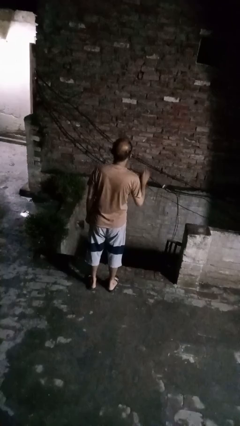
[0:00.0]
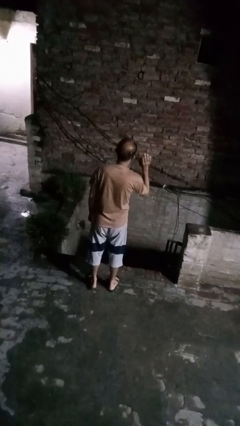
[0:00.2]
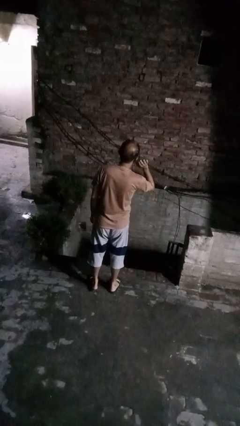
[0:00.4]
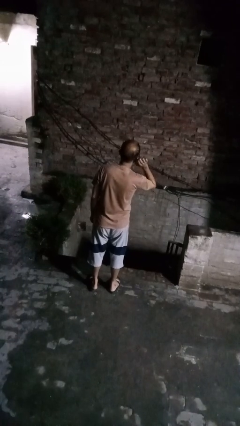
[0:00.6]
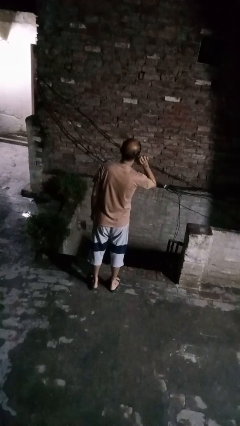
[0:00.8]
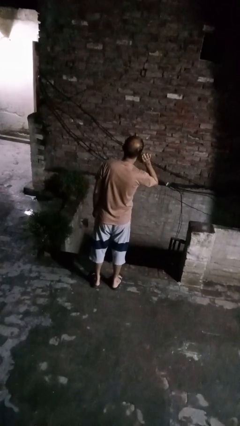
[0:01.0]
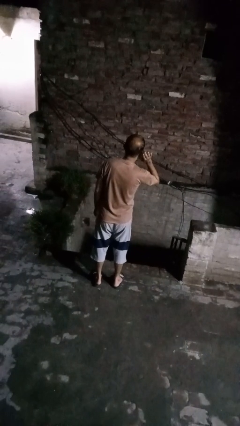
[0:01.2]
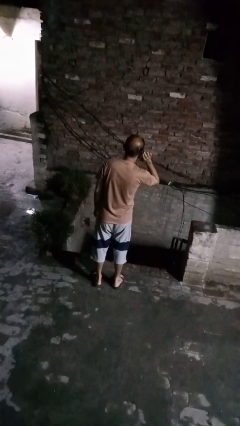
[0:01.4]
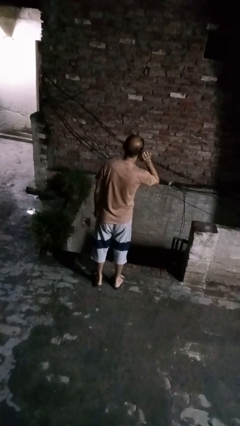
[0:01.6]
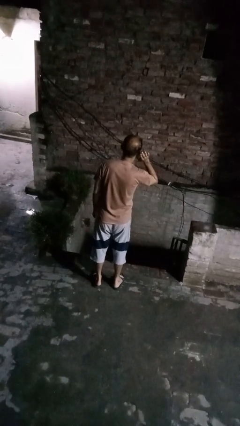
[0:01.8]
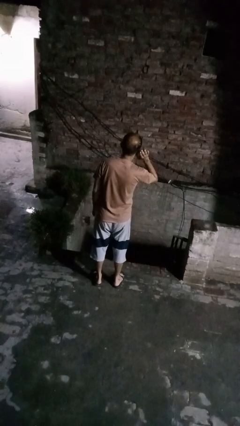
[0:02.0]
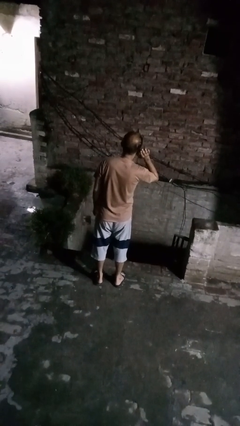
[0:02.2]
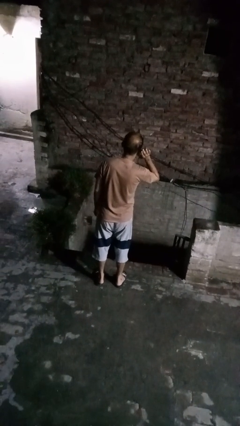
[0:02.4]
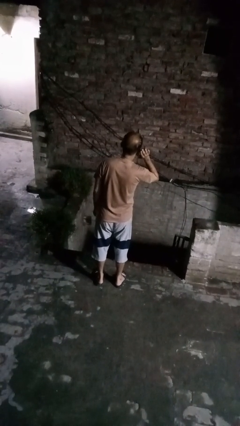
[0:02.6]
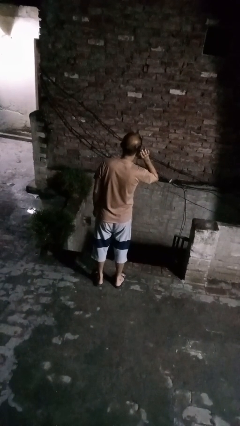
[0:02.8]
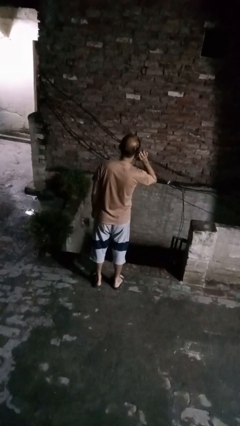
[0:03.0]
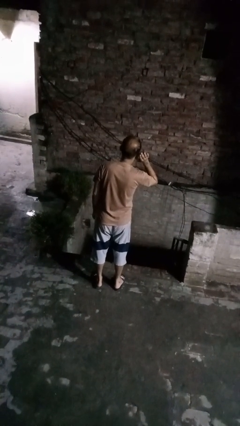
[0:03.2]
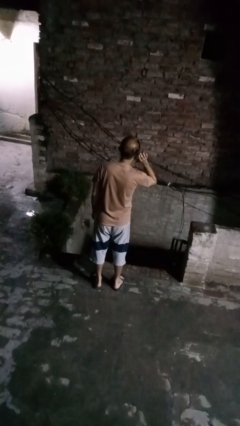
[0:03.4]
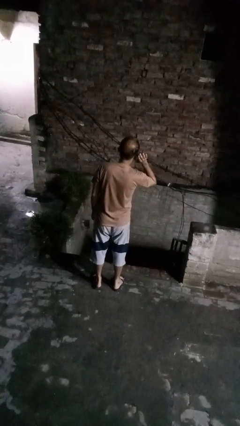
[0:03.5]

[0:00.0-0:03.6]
person gestures listen closely

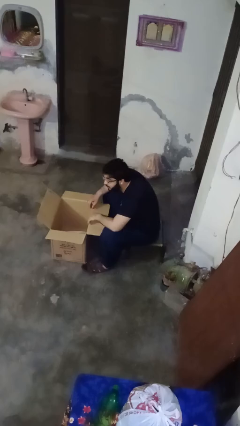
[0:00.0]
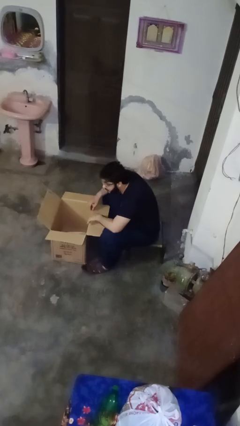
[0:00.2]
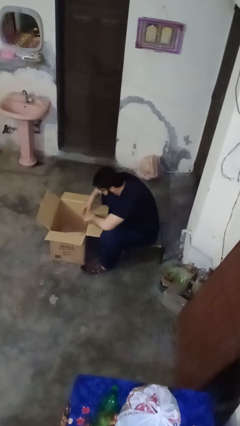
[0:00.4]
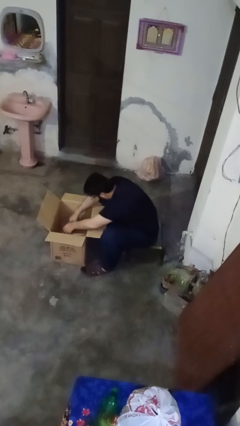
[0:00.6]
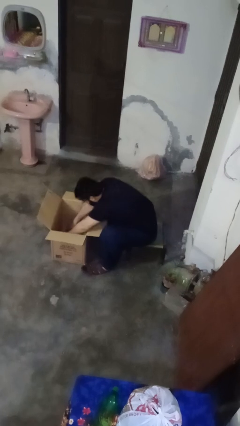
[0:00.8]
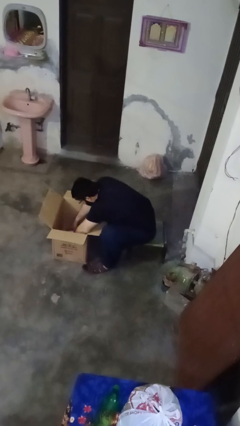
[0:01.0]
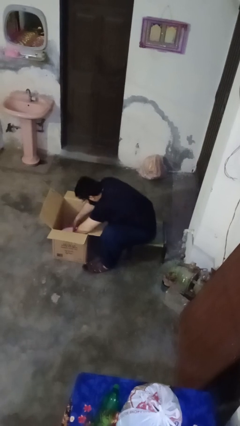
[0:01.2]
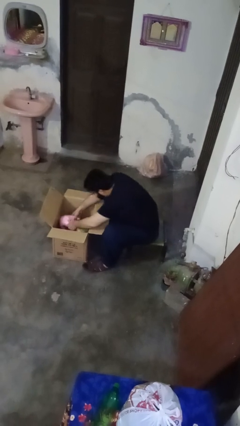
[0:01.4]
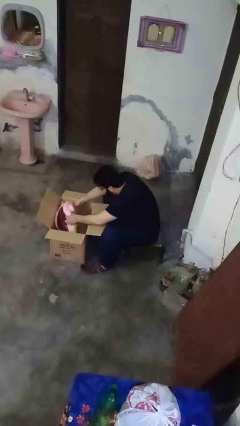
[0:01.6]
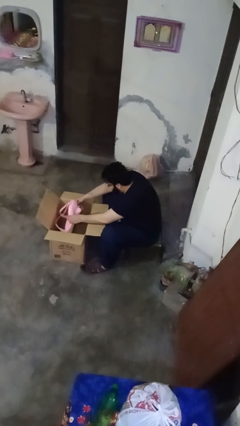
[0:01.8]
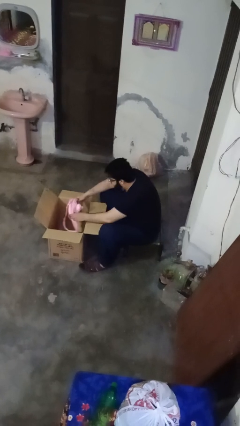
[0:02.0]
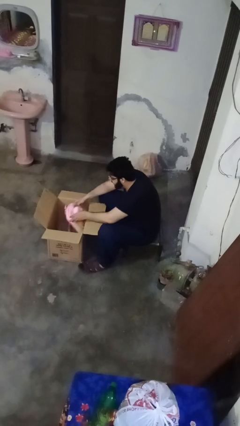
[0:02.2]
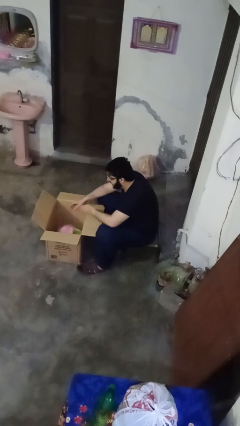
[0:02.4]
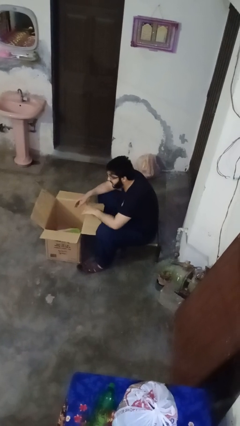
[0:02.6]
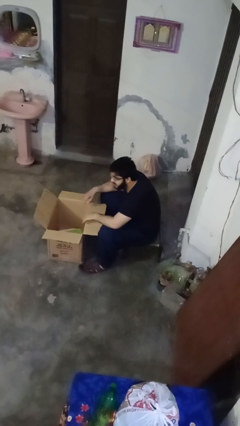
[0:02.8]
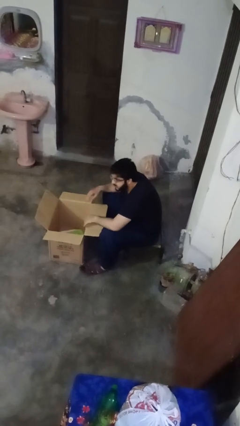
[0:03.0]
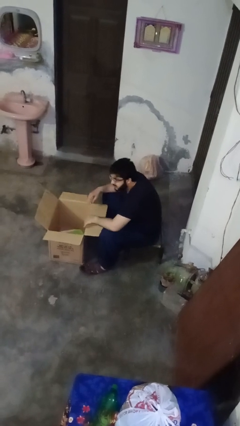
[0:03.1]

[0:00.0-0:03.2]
person searches in box

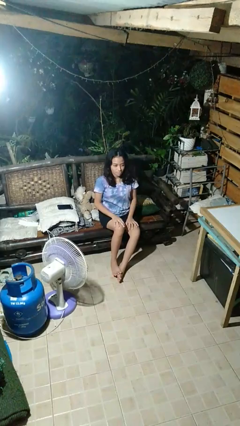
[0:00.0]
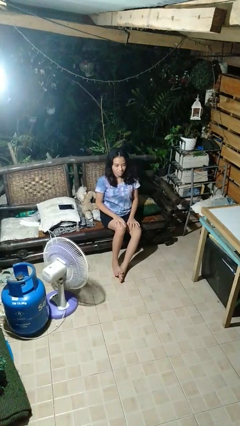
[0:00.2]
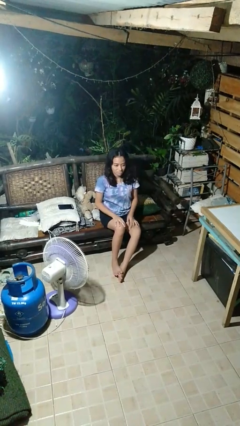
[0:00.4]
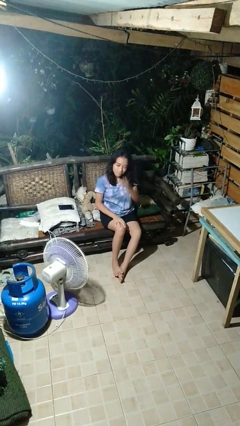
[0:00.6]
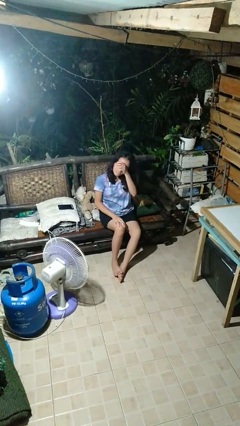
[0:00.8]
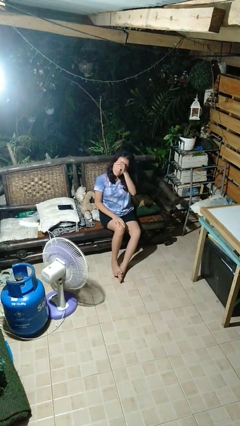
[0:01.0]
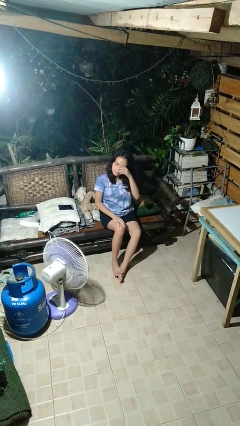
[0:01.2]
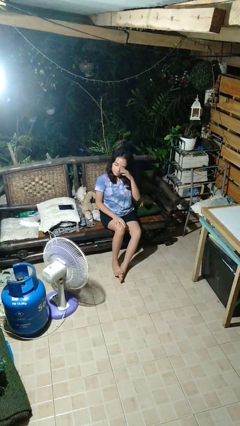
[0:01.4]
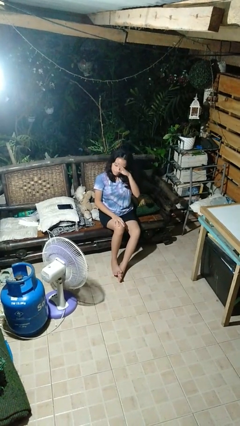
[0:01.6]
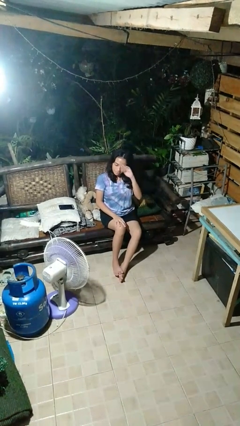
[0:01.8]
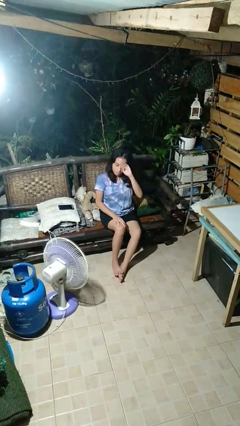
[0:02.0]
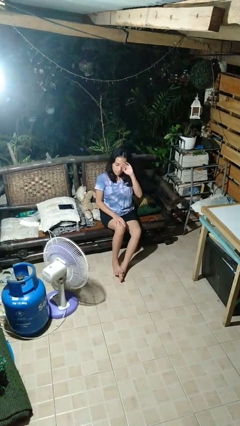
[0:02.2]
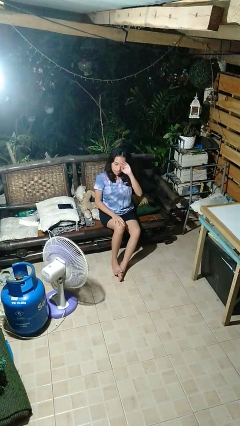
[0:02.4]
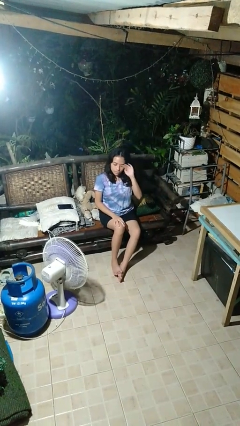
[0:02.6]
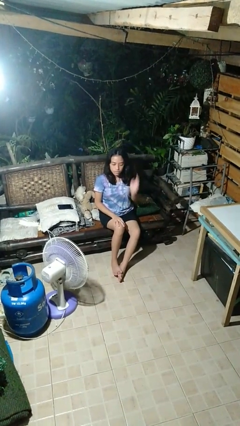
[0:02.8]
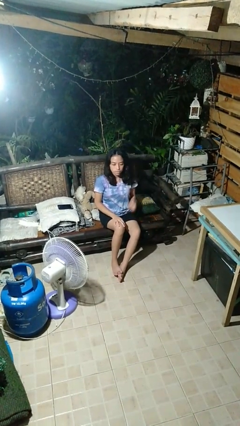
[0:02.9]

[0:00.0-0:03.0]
person rubs eyes

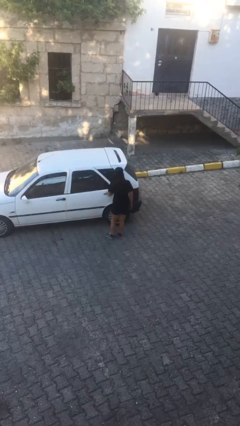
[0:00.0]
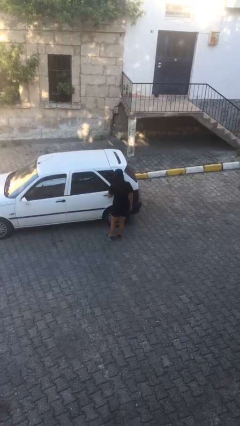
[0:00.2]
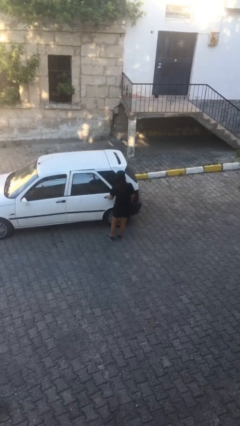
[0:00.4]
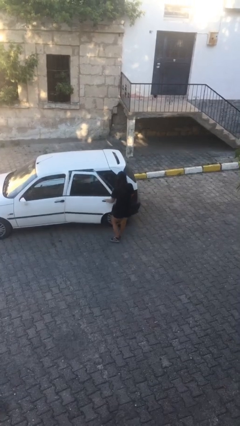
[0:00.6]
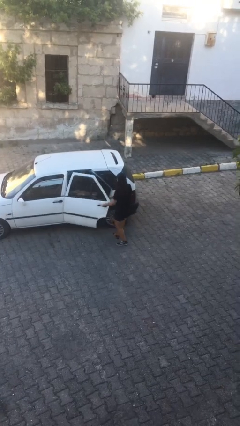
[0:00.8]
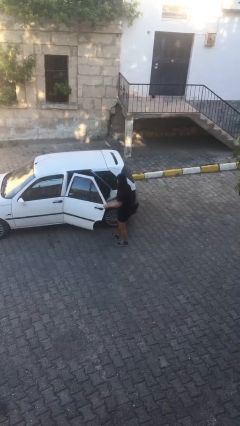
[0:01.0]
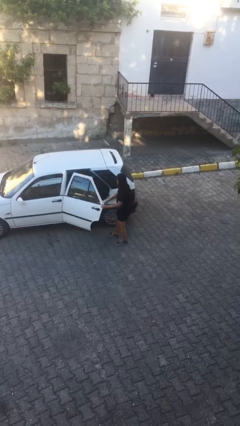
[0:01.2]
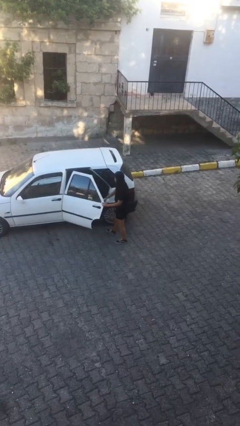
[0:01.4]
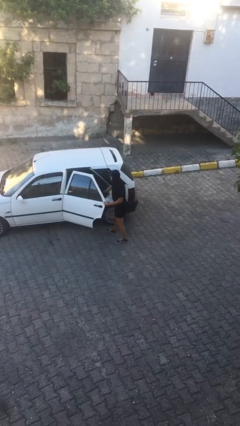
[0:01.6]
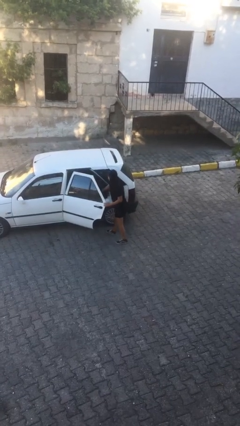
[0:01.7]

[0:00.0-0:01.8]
person opens car door

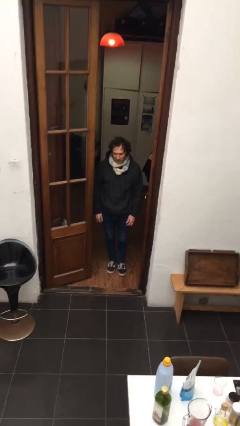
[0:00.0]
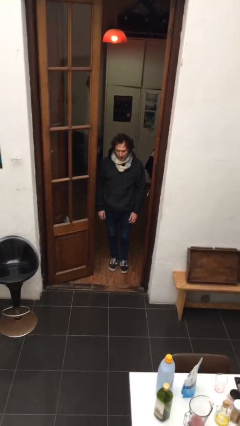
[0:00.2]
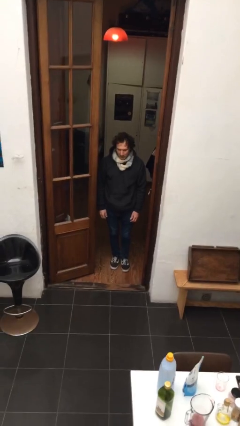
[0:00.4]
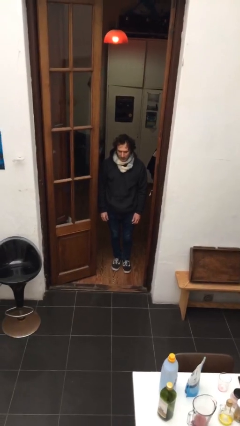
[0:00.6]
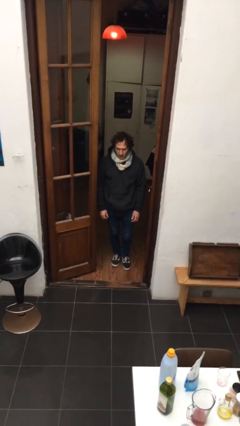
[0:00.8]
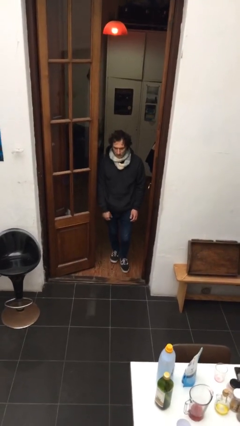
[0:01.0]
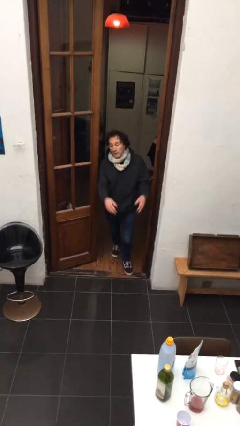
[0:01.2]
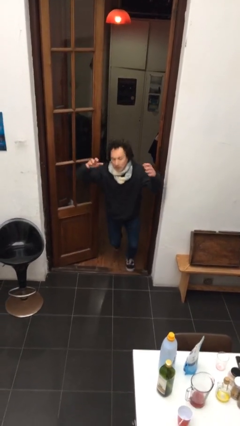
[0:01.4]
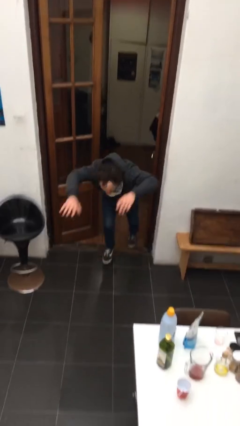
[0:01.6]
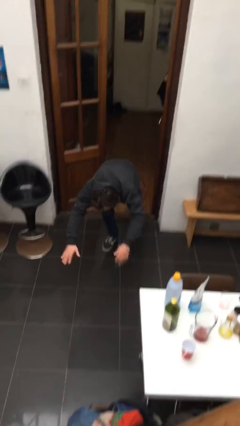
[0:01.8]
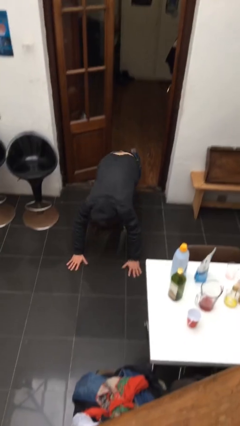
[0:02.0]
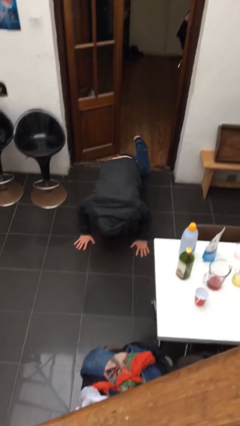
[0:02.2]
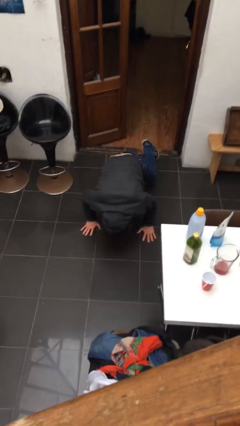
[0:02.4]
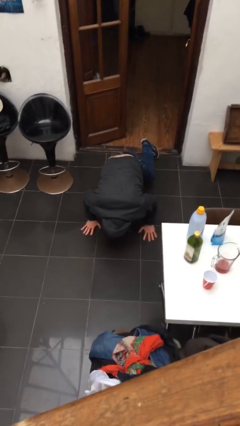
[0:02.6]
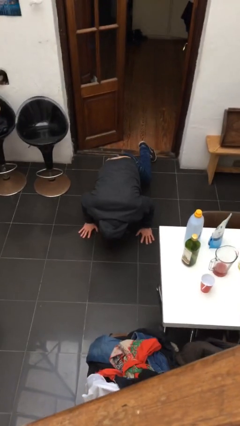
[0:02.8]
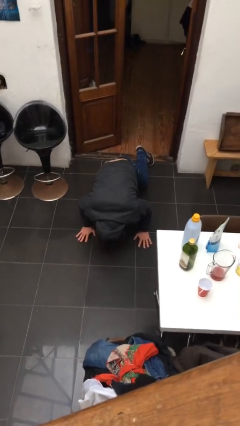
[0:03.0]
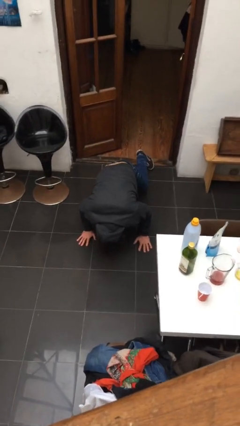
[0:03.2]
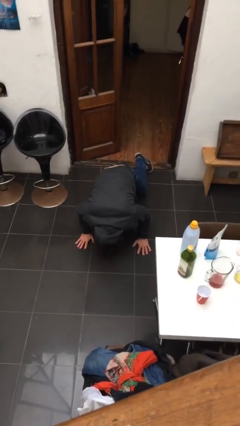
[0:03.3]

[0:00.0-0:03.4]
person trips on object on floor

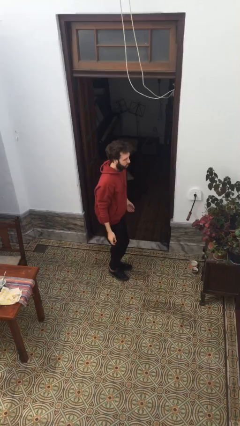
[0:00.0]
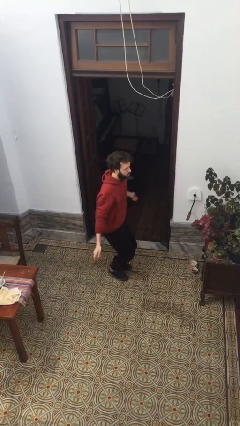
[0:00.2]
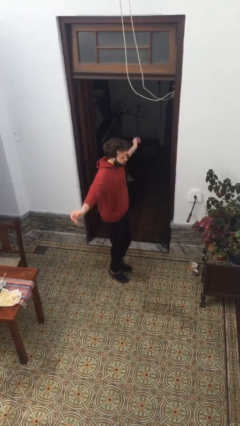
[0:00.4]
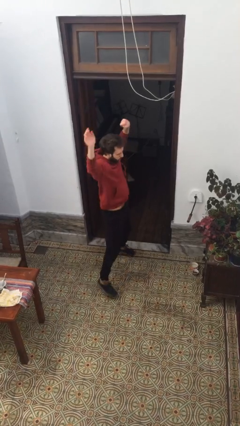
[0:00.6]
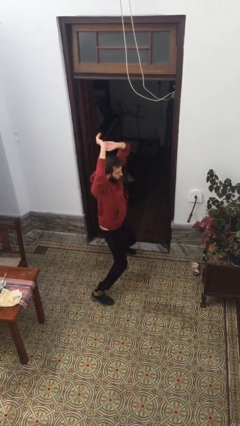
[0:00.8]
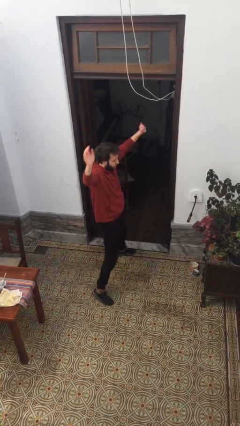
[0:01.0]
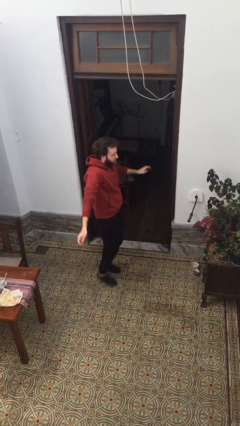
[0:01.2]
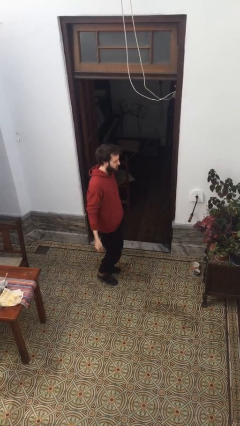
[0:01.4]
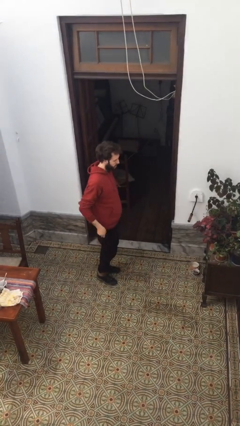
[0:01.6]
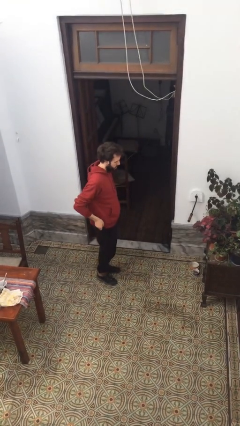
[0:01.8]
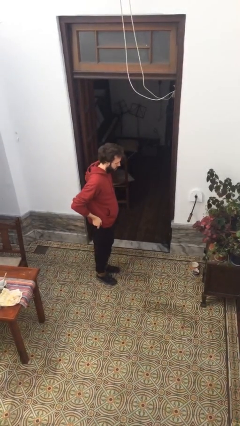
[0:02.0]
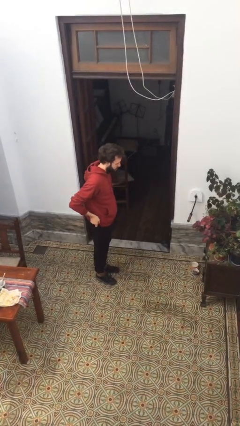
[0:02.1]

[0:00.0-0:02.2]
person exercises with jumping jacks

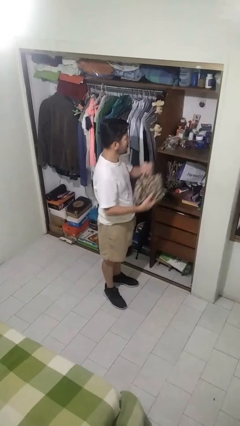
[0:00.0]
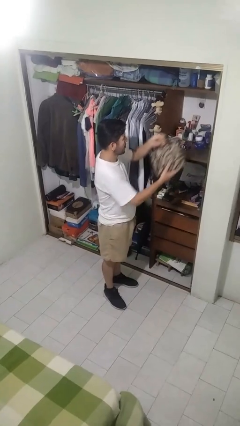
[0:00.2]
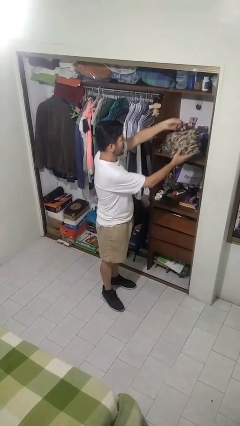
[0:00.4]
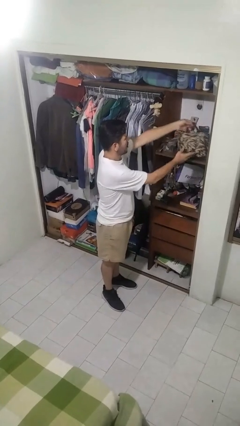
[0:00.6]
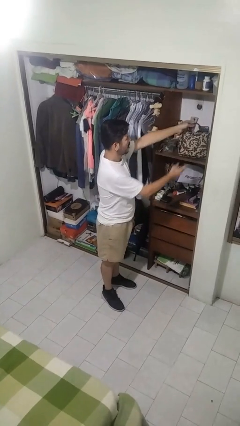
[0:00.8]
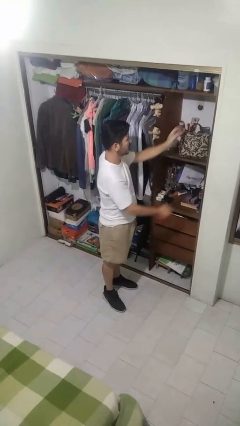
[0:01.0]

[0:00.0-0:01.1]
person picks up object from shelf
